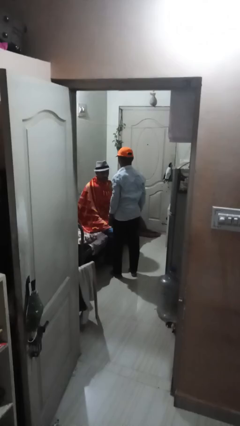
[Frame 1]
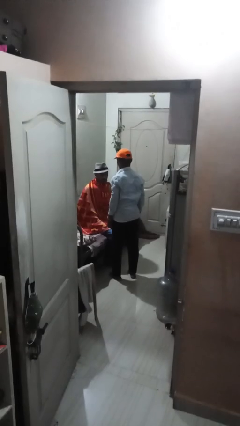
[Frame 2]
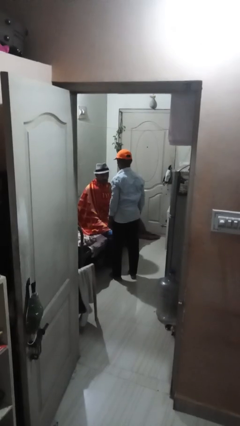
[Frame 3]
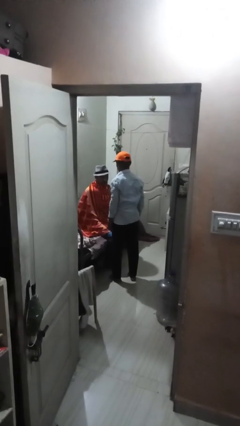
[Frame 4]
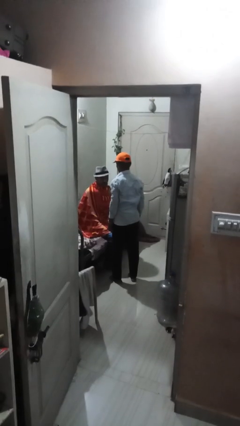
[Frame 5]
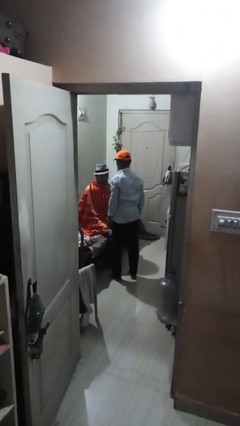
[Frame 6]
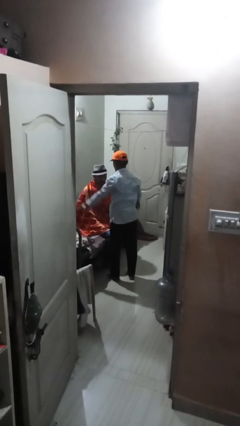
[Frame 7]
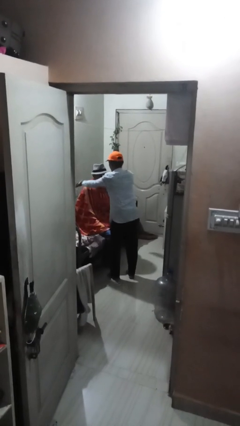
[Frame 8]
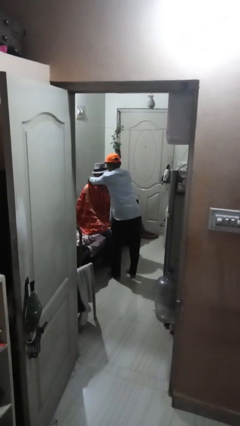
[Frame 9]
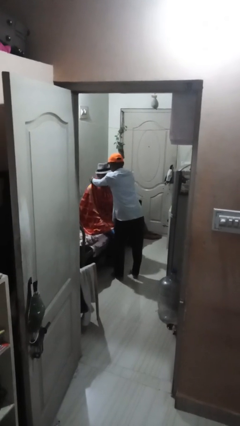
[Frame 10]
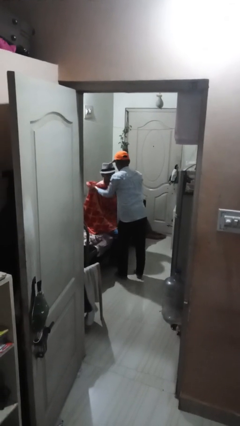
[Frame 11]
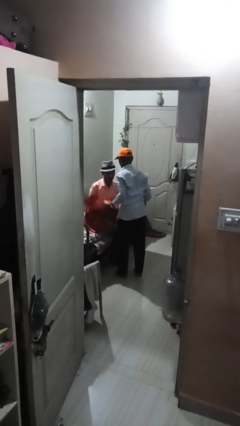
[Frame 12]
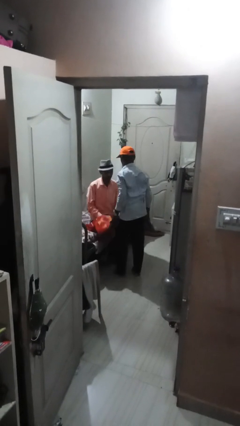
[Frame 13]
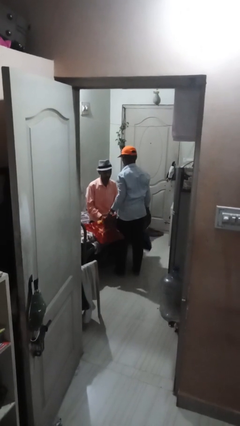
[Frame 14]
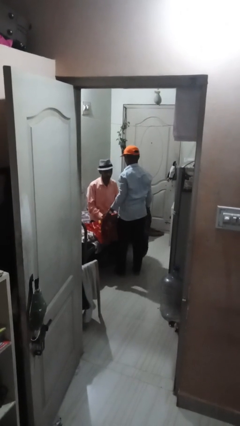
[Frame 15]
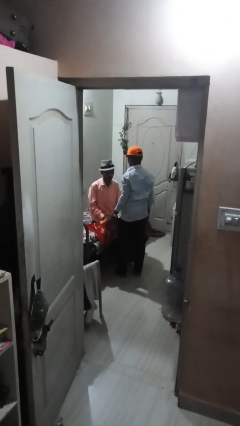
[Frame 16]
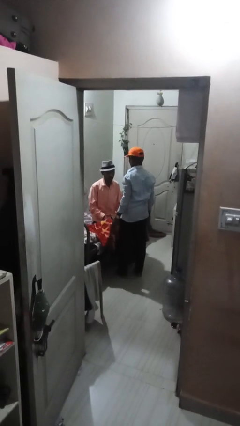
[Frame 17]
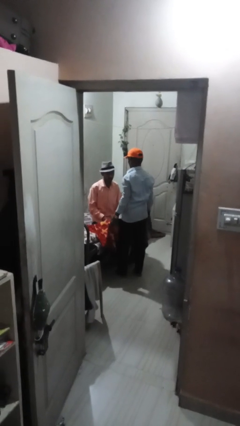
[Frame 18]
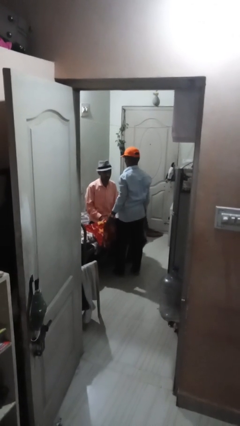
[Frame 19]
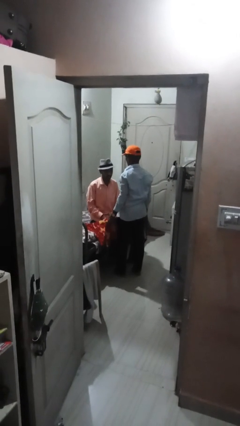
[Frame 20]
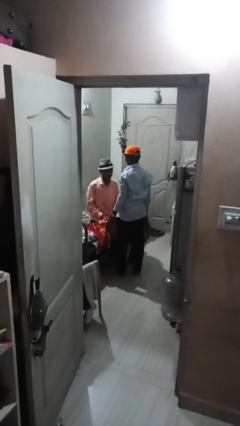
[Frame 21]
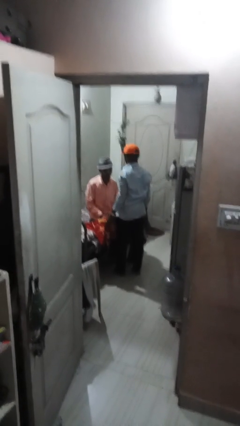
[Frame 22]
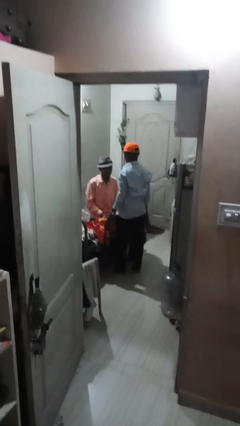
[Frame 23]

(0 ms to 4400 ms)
person uncovers friend with blanket

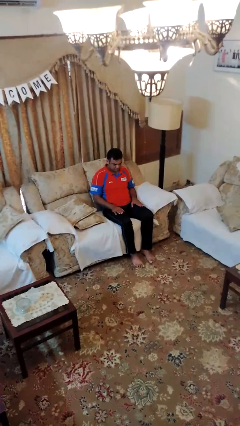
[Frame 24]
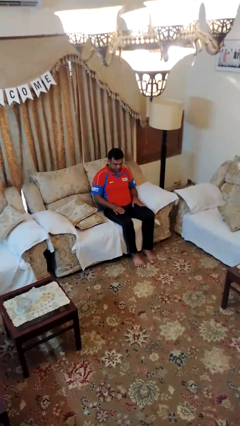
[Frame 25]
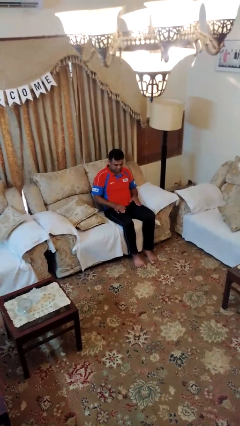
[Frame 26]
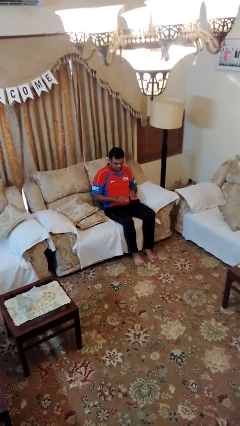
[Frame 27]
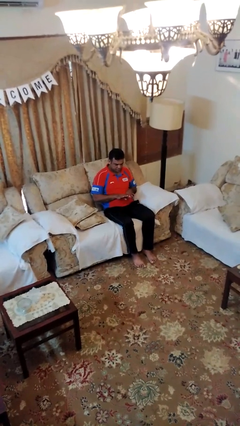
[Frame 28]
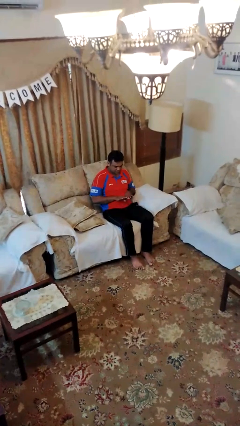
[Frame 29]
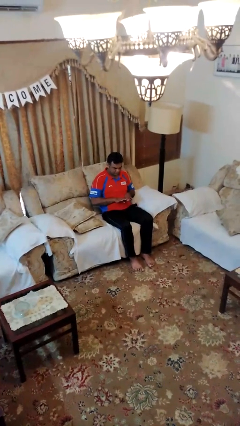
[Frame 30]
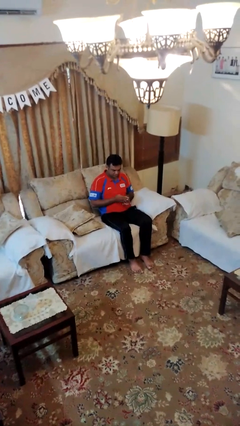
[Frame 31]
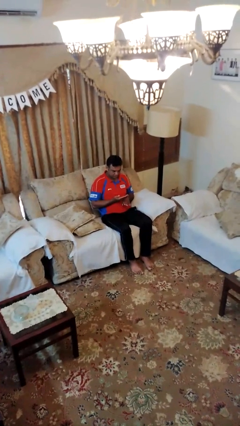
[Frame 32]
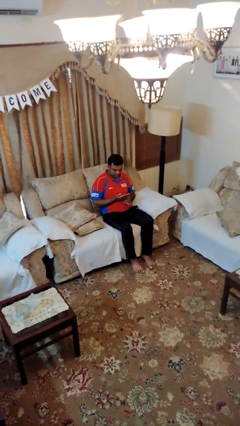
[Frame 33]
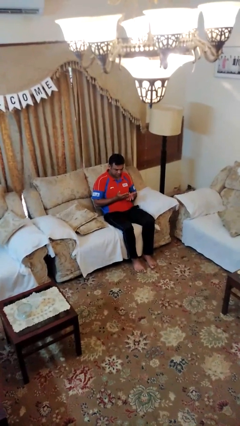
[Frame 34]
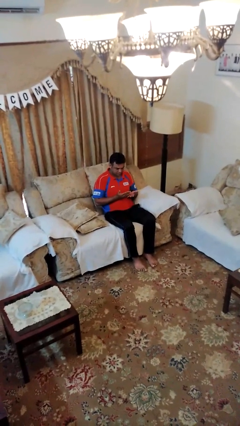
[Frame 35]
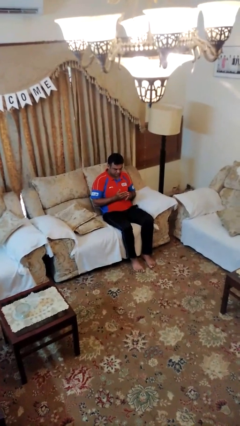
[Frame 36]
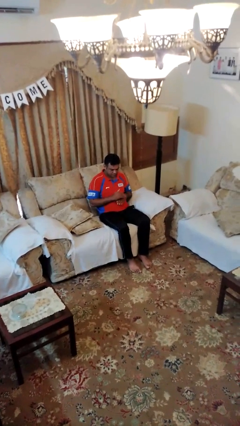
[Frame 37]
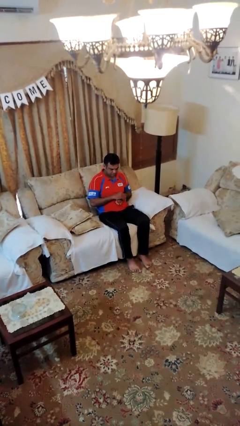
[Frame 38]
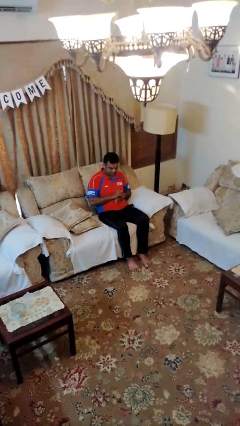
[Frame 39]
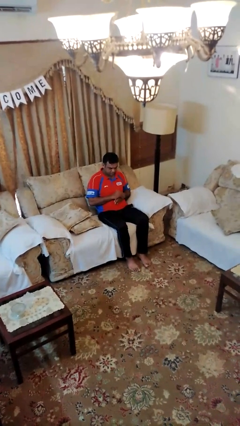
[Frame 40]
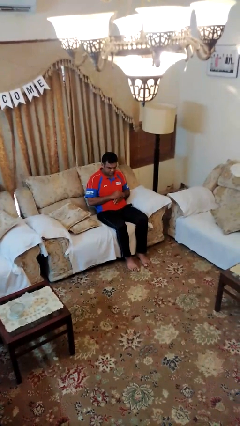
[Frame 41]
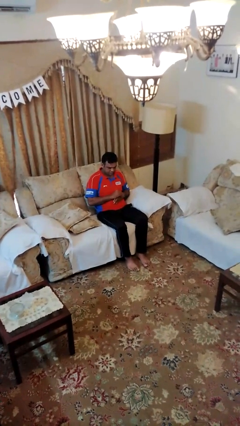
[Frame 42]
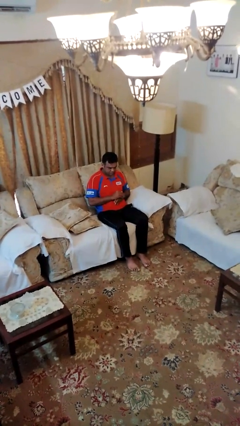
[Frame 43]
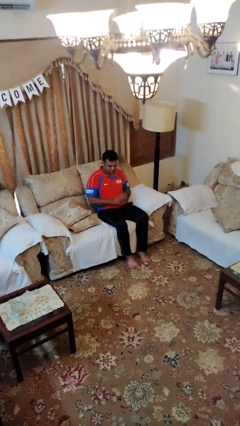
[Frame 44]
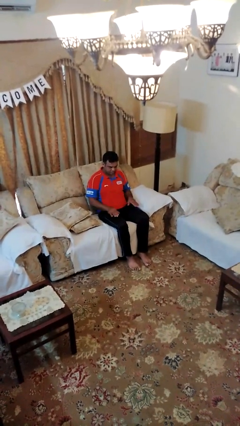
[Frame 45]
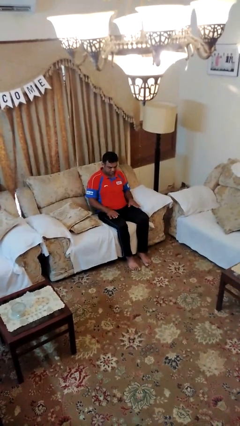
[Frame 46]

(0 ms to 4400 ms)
person looks at hands in lap

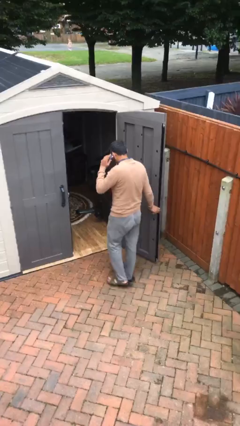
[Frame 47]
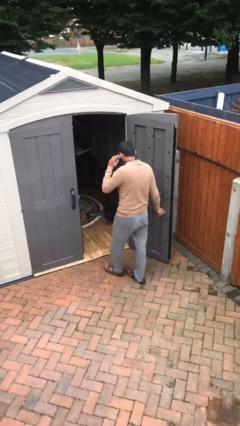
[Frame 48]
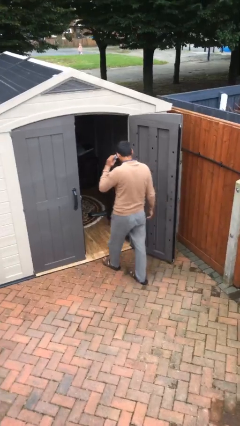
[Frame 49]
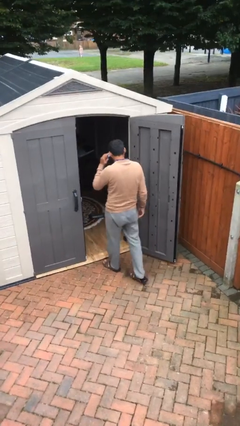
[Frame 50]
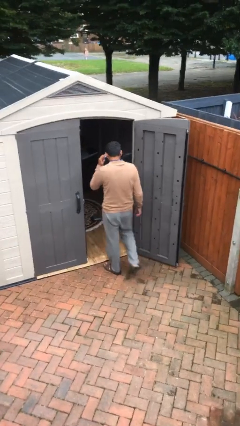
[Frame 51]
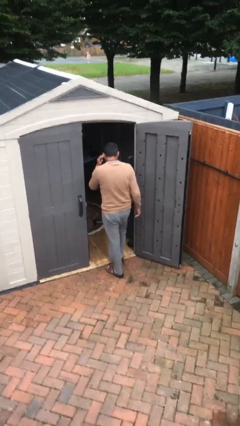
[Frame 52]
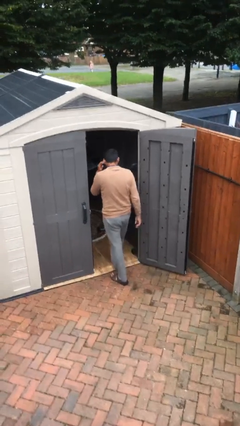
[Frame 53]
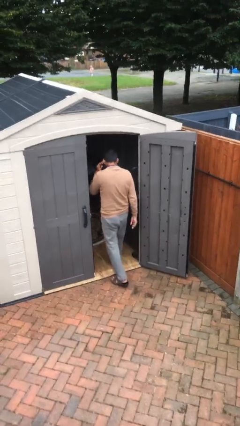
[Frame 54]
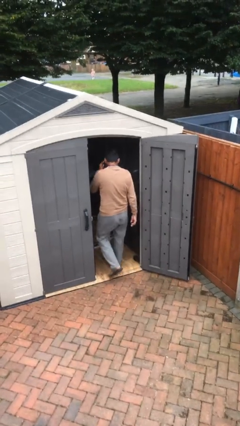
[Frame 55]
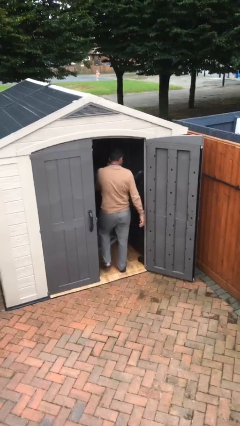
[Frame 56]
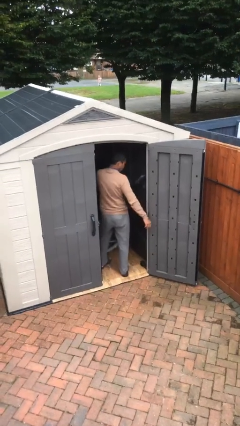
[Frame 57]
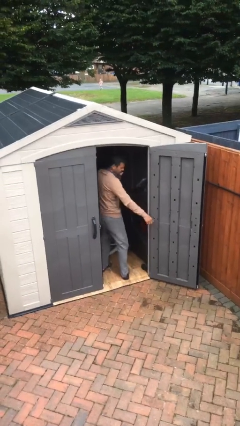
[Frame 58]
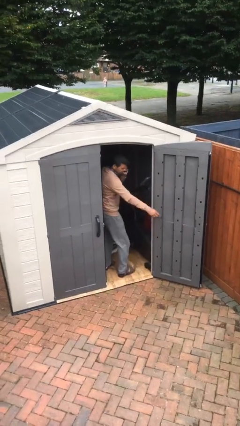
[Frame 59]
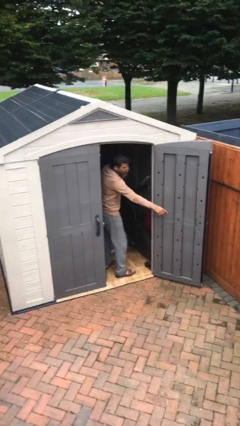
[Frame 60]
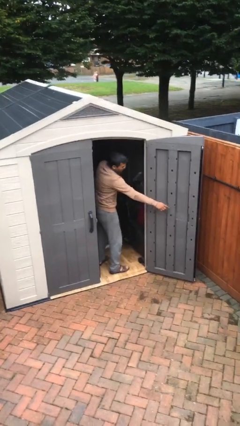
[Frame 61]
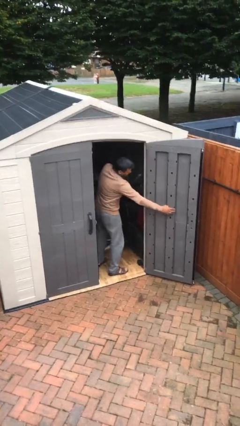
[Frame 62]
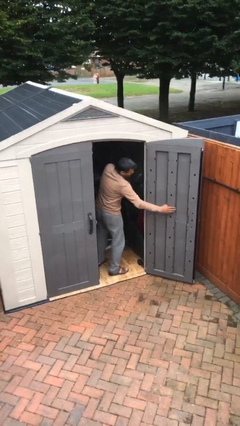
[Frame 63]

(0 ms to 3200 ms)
person exits scene through structure

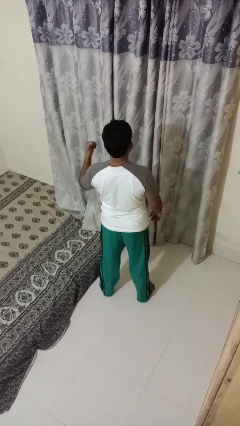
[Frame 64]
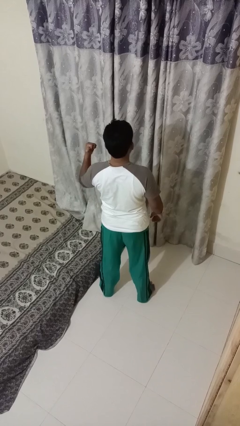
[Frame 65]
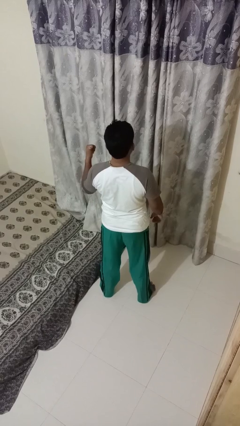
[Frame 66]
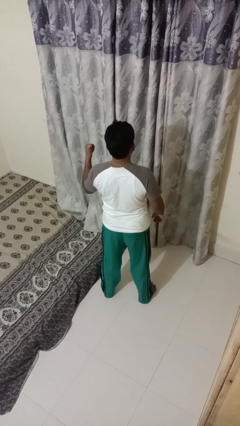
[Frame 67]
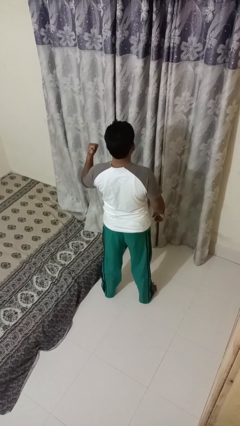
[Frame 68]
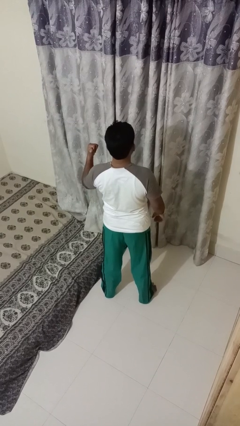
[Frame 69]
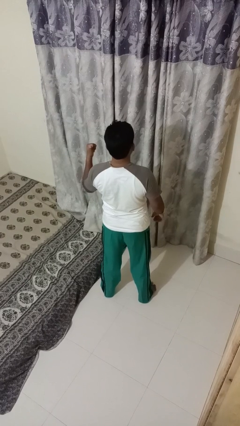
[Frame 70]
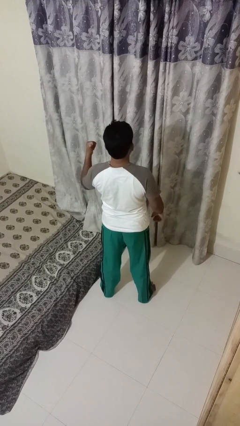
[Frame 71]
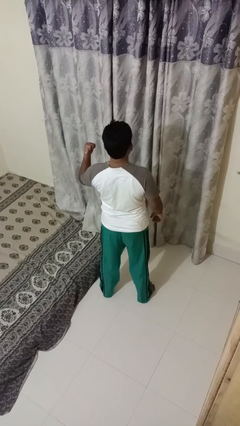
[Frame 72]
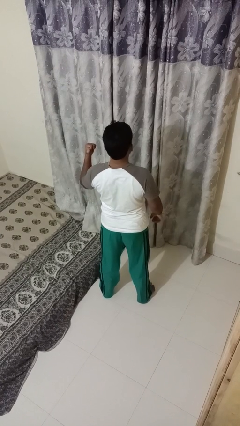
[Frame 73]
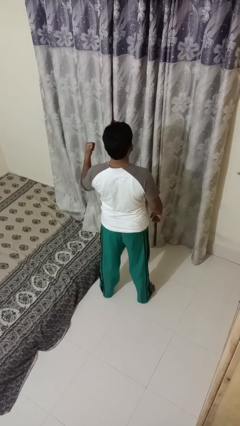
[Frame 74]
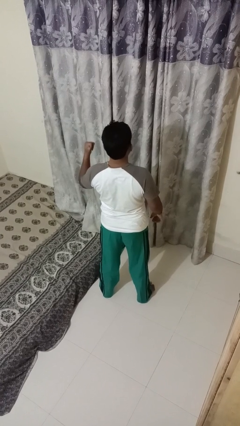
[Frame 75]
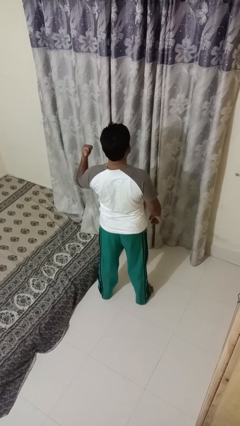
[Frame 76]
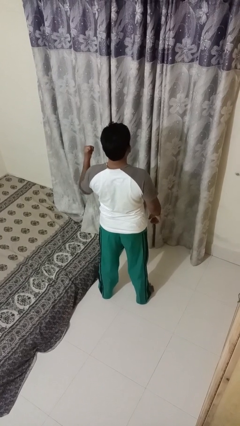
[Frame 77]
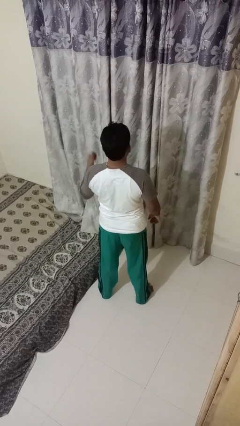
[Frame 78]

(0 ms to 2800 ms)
person gestures behind me

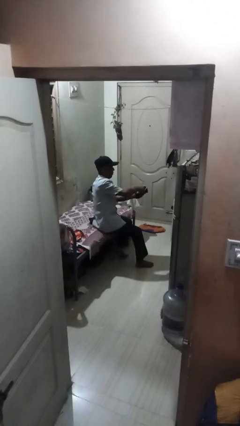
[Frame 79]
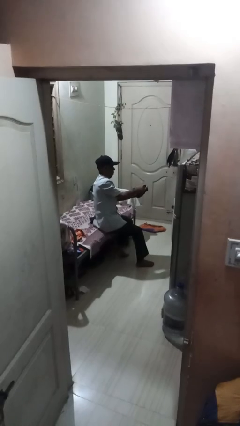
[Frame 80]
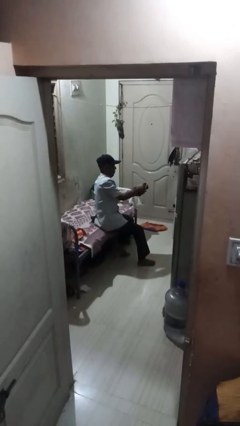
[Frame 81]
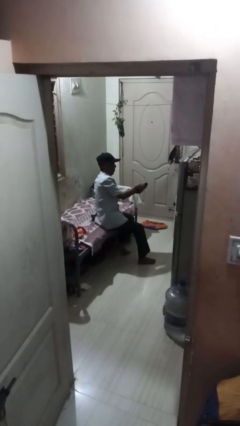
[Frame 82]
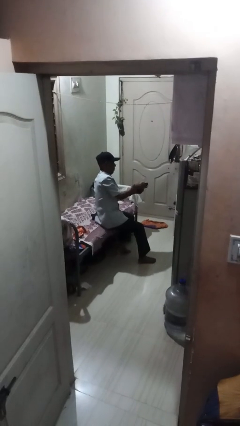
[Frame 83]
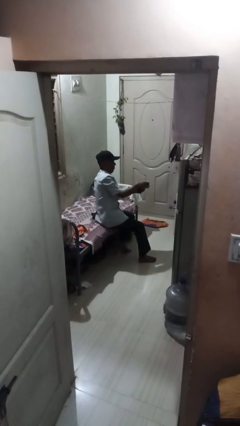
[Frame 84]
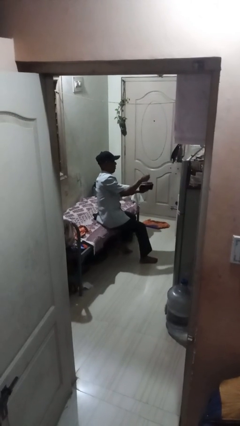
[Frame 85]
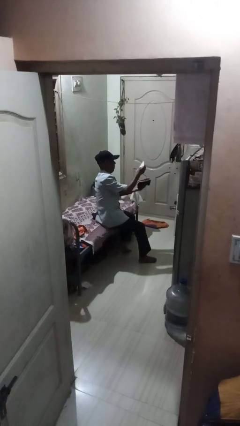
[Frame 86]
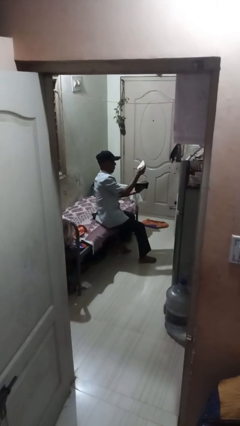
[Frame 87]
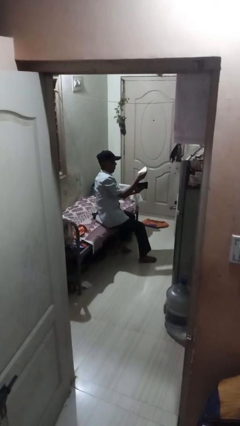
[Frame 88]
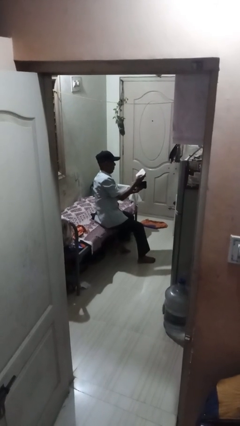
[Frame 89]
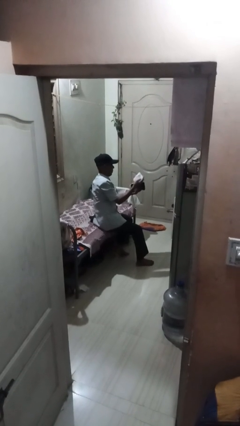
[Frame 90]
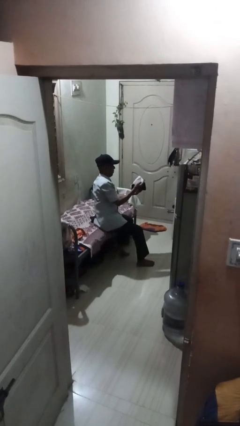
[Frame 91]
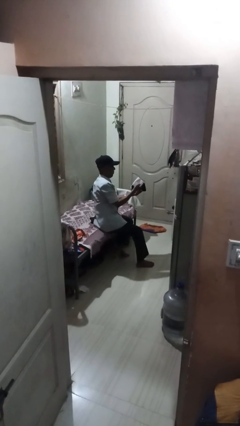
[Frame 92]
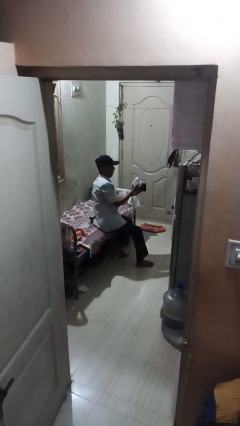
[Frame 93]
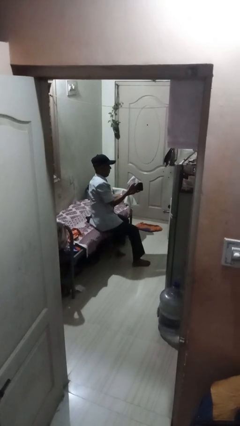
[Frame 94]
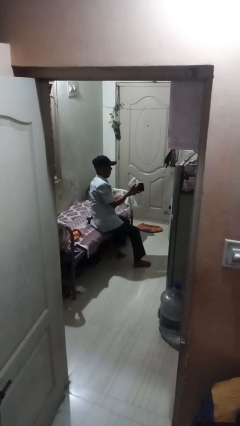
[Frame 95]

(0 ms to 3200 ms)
person takes object from purse
